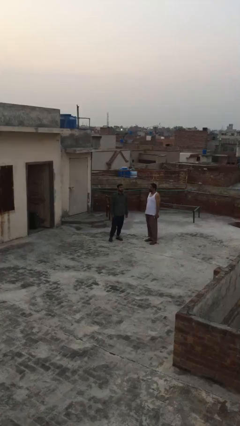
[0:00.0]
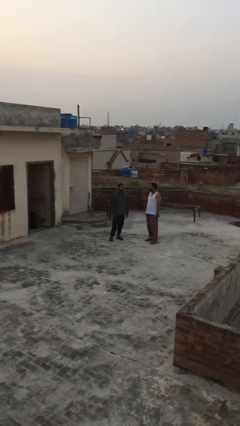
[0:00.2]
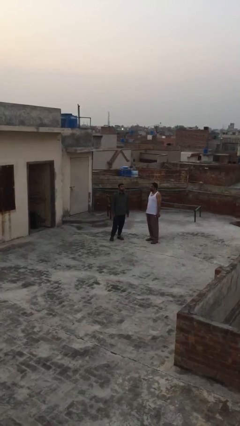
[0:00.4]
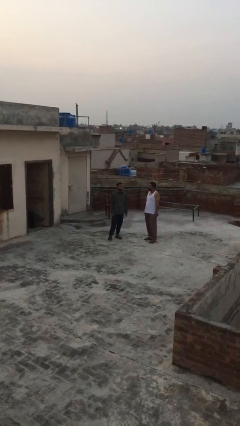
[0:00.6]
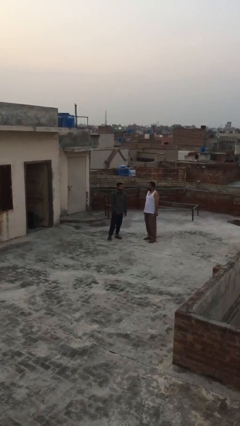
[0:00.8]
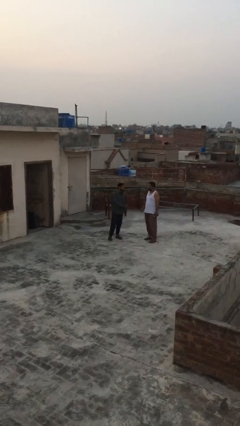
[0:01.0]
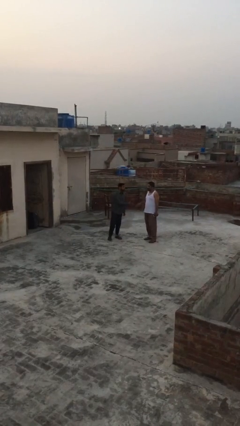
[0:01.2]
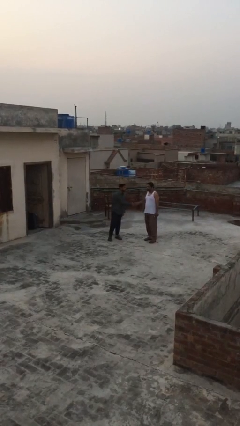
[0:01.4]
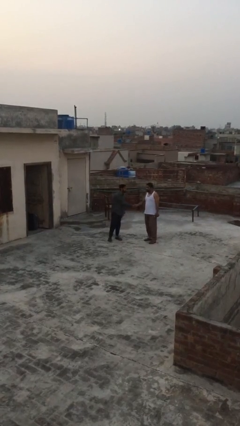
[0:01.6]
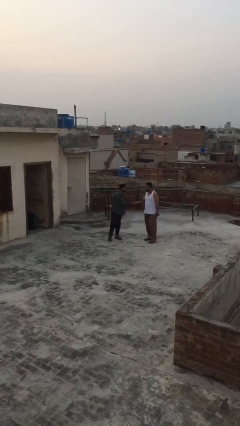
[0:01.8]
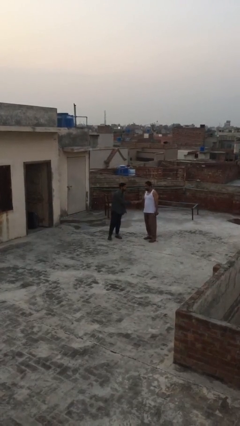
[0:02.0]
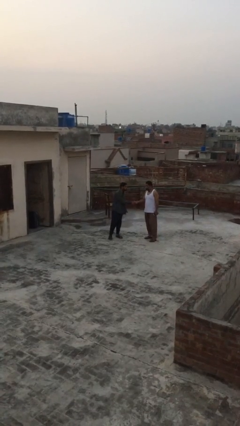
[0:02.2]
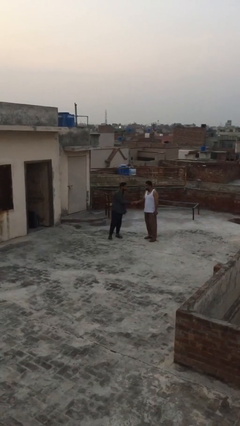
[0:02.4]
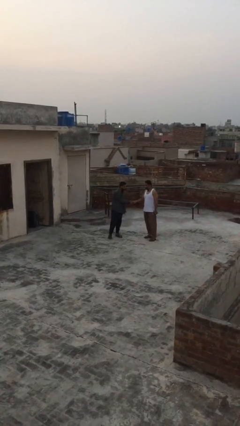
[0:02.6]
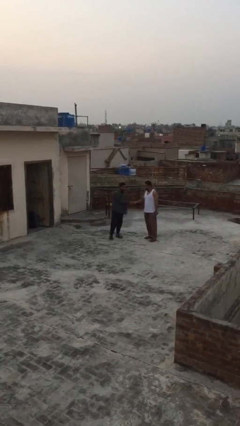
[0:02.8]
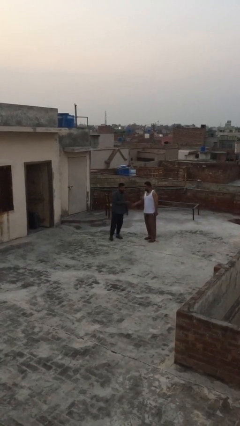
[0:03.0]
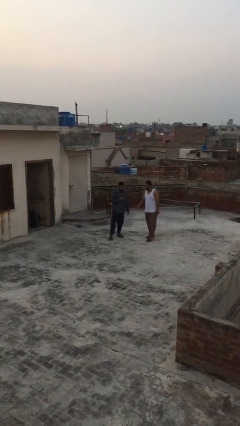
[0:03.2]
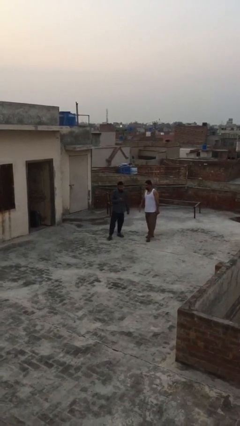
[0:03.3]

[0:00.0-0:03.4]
person shakes hand

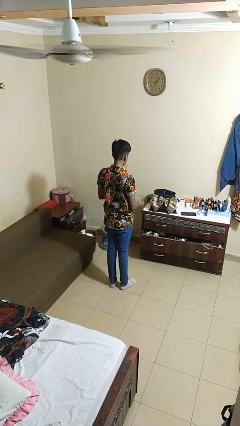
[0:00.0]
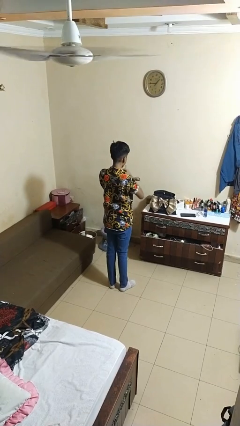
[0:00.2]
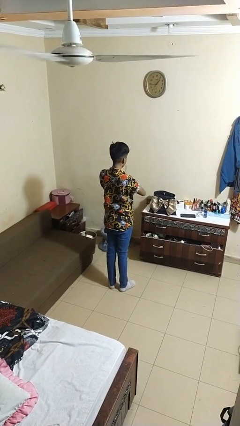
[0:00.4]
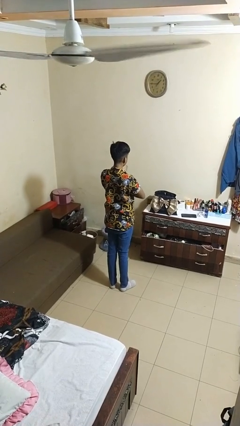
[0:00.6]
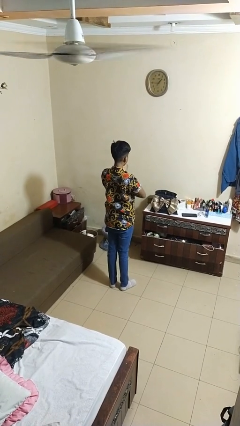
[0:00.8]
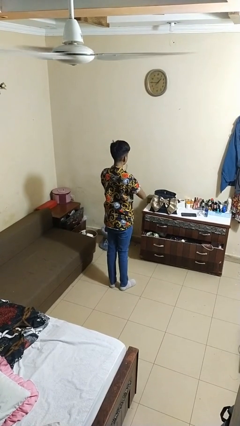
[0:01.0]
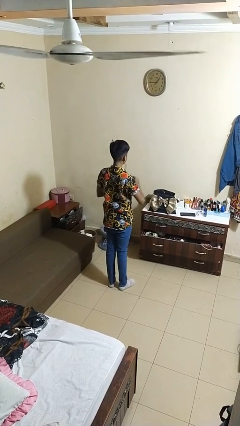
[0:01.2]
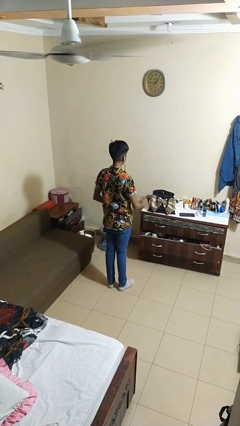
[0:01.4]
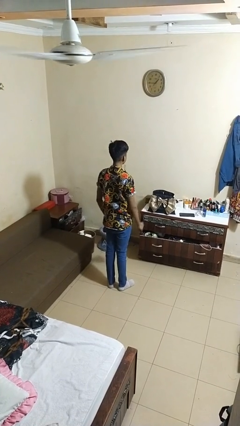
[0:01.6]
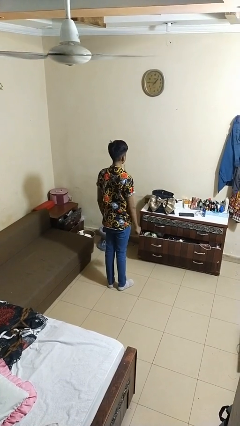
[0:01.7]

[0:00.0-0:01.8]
person crosses arms

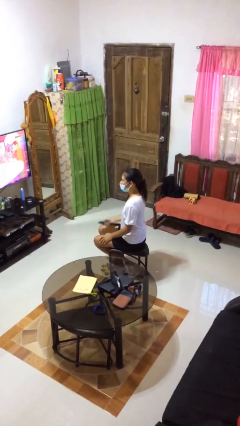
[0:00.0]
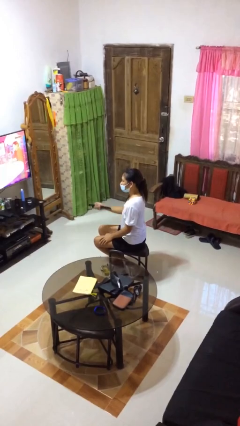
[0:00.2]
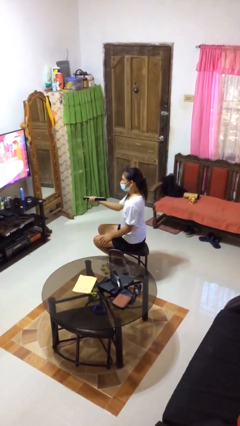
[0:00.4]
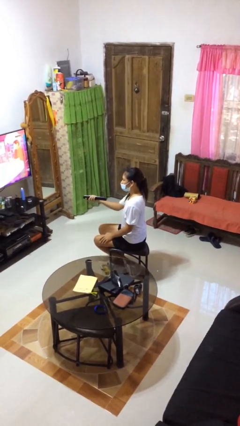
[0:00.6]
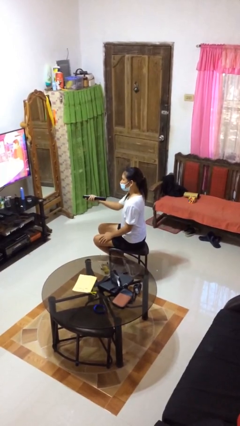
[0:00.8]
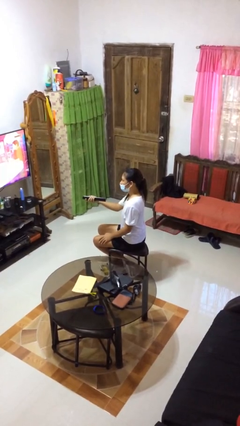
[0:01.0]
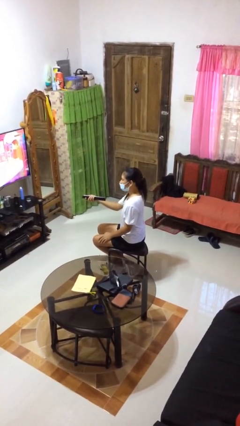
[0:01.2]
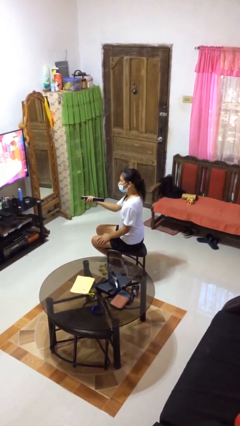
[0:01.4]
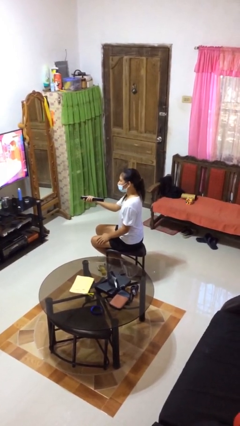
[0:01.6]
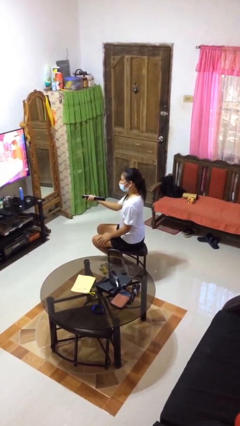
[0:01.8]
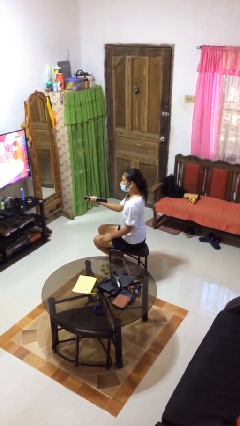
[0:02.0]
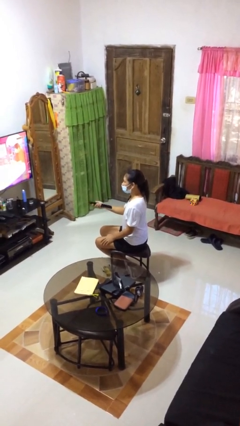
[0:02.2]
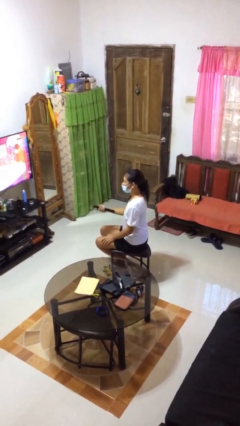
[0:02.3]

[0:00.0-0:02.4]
person uses television remote

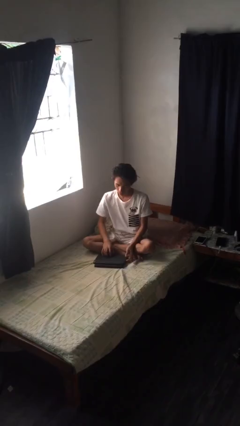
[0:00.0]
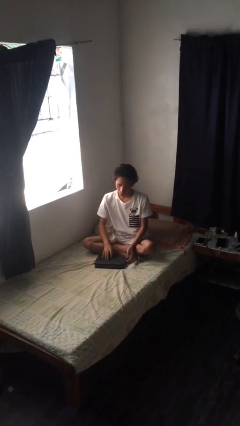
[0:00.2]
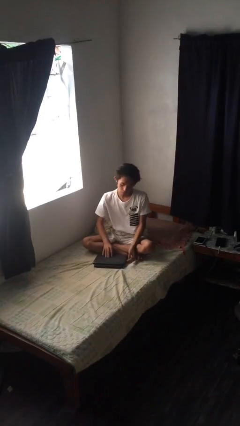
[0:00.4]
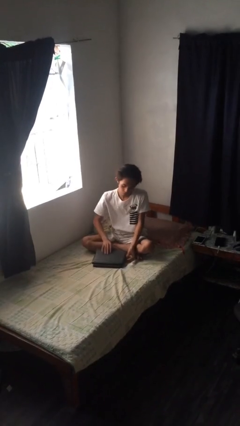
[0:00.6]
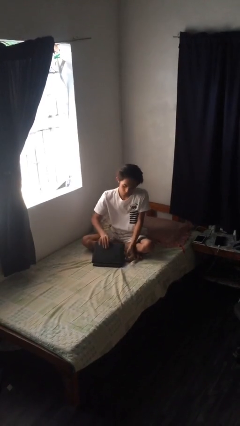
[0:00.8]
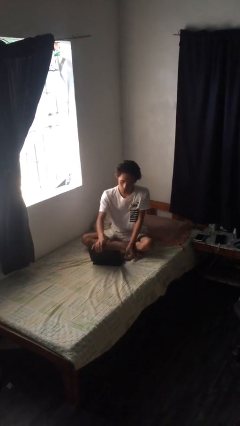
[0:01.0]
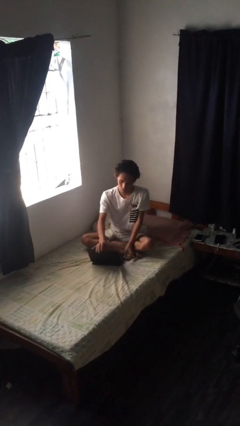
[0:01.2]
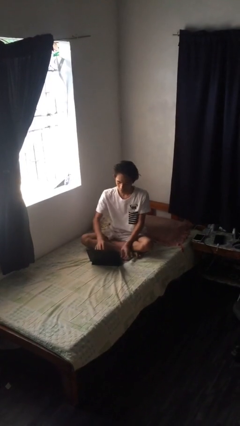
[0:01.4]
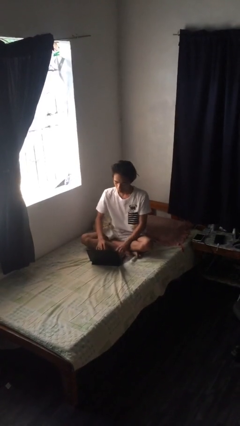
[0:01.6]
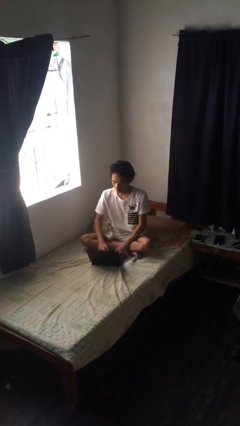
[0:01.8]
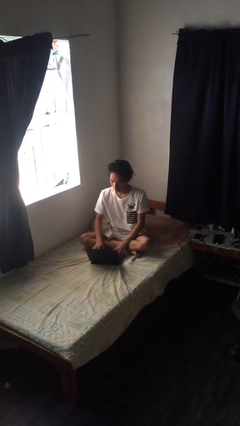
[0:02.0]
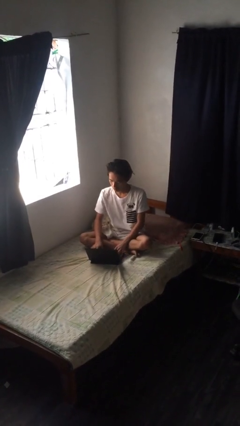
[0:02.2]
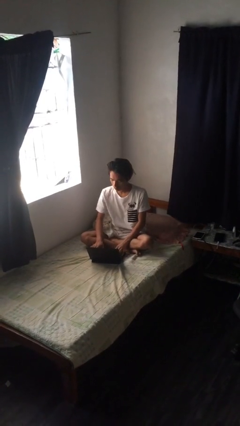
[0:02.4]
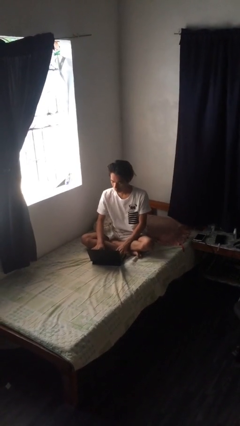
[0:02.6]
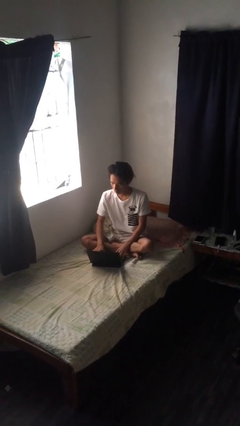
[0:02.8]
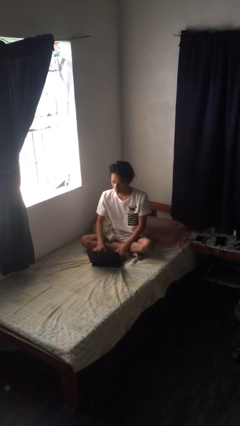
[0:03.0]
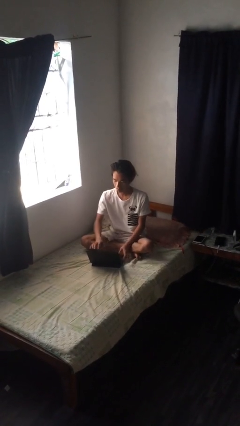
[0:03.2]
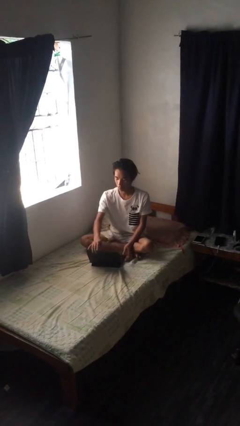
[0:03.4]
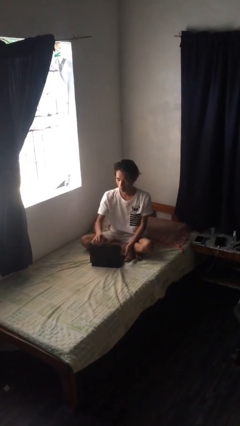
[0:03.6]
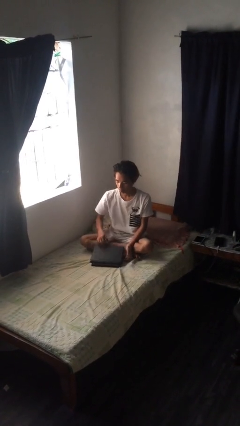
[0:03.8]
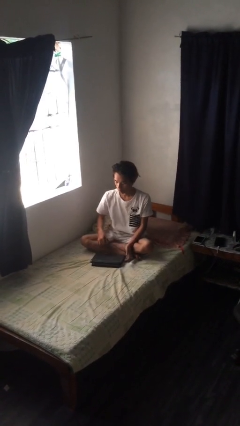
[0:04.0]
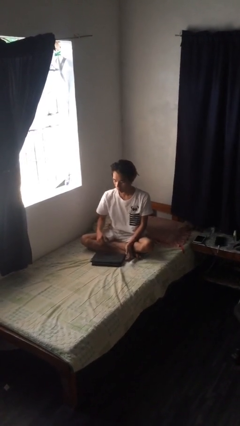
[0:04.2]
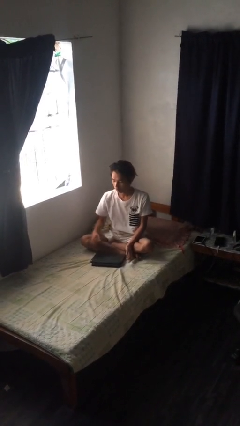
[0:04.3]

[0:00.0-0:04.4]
person interacts with laptop

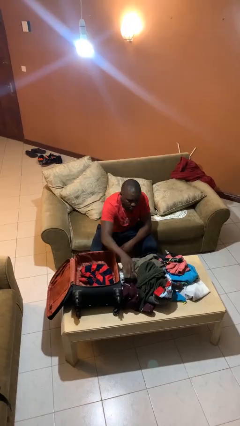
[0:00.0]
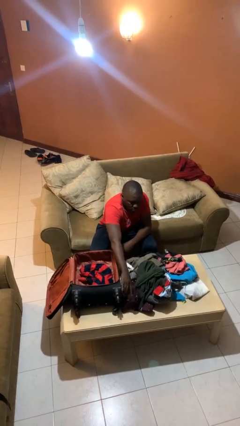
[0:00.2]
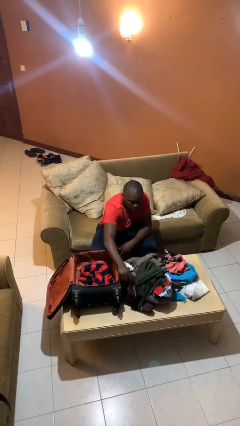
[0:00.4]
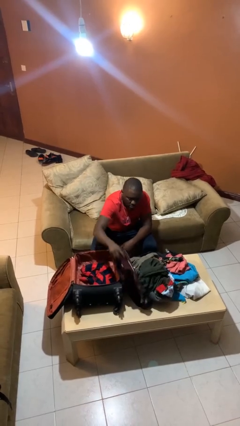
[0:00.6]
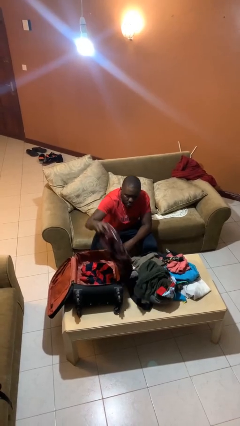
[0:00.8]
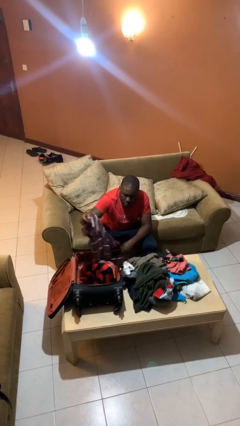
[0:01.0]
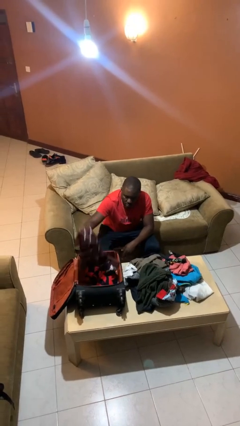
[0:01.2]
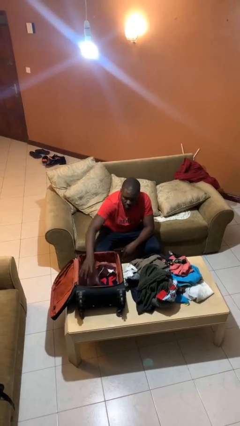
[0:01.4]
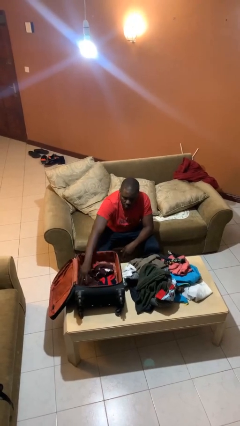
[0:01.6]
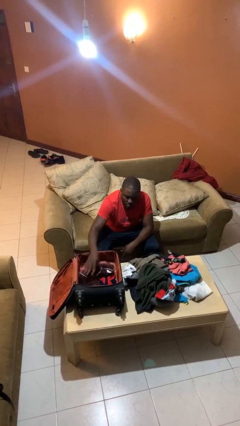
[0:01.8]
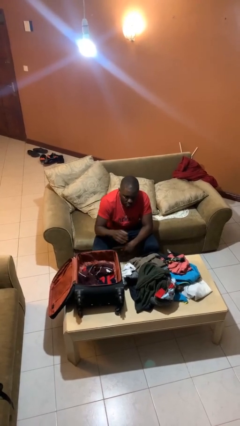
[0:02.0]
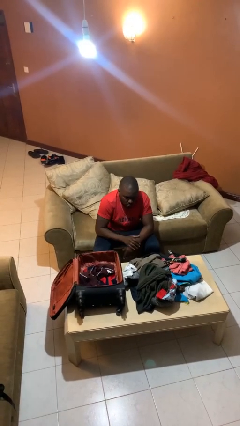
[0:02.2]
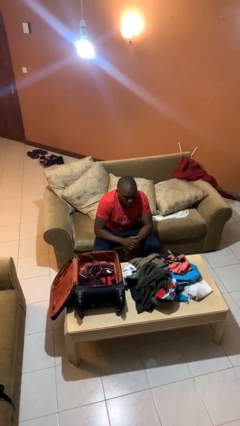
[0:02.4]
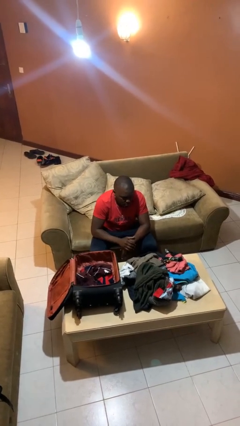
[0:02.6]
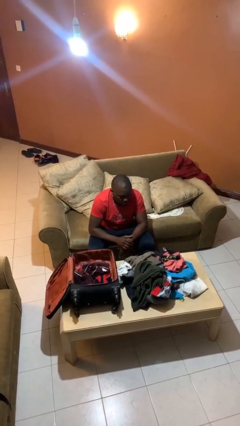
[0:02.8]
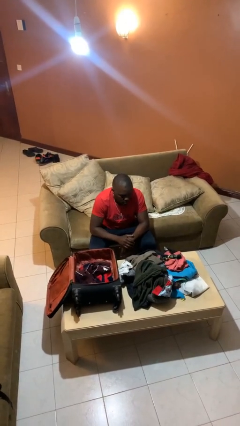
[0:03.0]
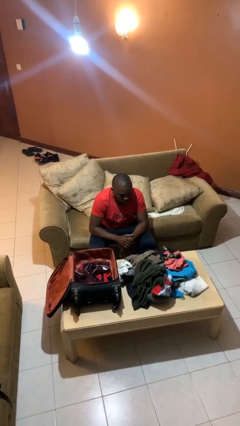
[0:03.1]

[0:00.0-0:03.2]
person loads clothes into suitcase

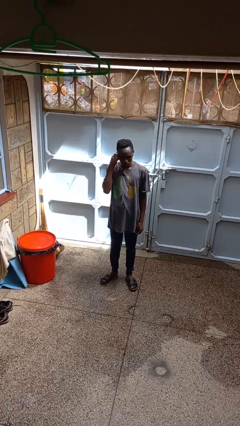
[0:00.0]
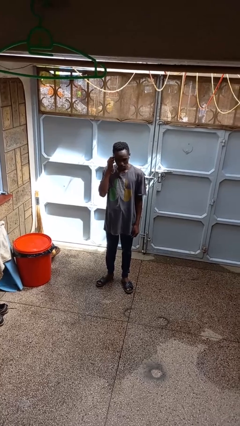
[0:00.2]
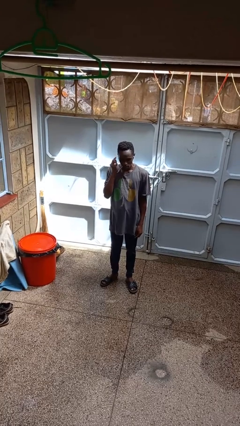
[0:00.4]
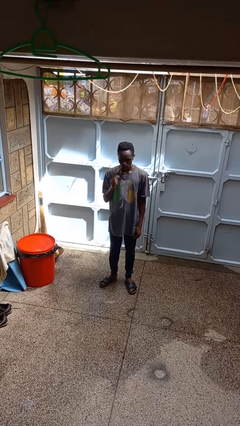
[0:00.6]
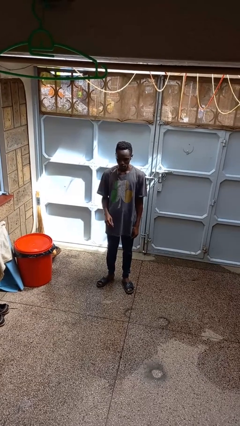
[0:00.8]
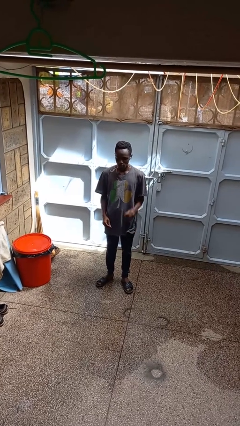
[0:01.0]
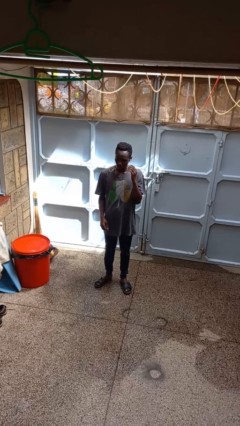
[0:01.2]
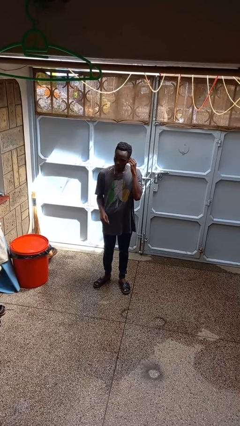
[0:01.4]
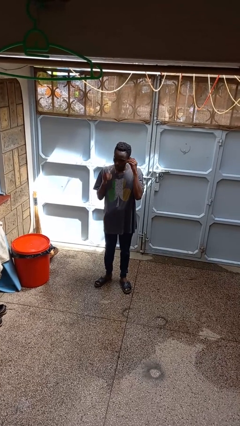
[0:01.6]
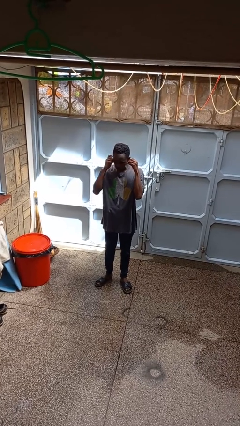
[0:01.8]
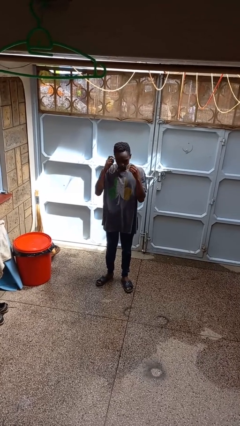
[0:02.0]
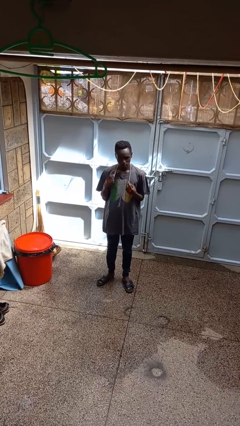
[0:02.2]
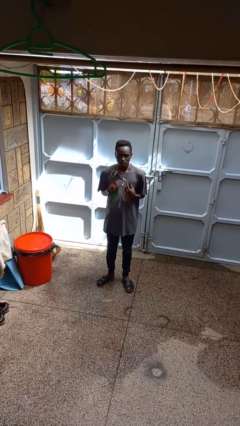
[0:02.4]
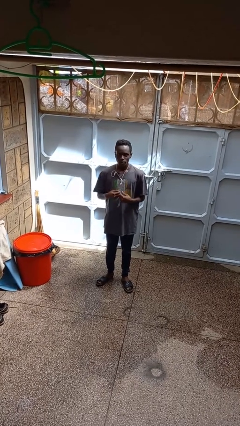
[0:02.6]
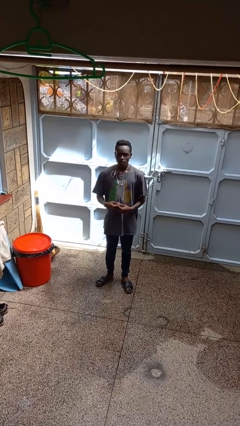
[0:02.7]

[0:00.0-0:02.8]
person takes off headphones
